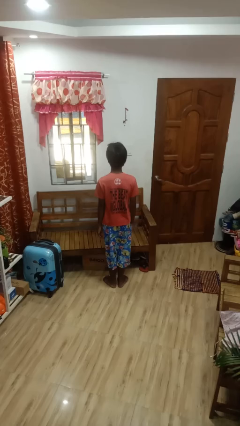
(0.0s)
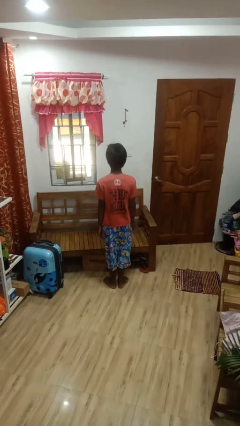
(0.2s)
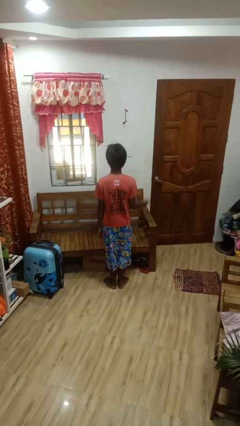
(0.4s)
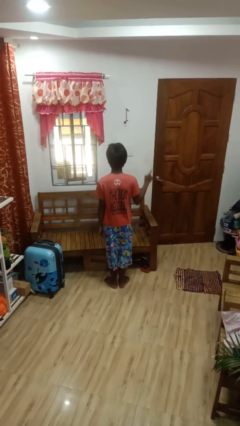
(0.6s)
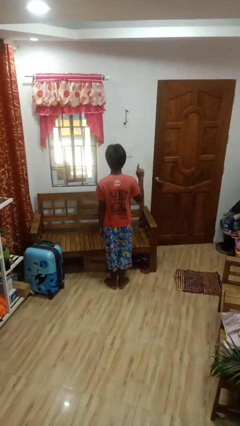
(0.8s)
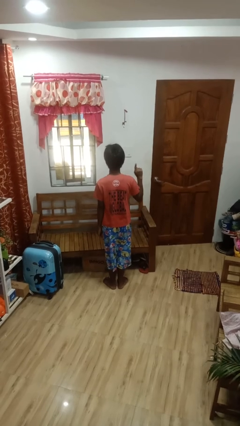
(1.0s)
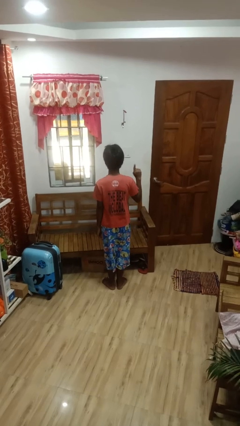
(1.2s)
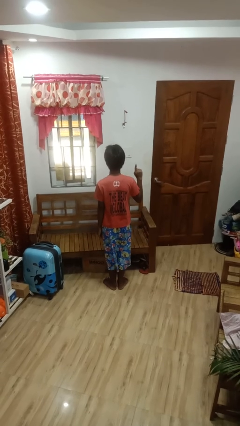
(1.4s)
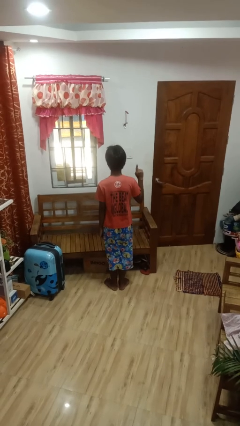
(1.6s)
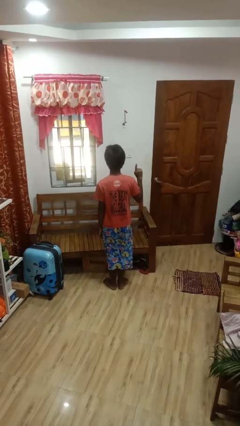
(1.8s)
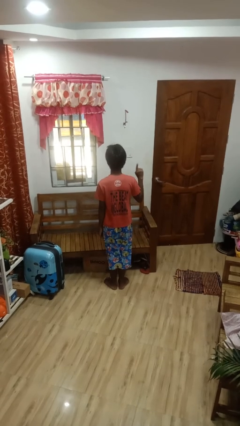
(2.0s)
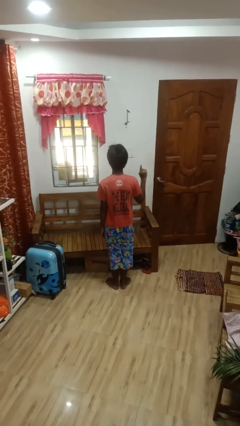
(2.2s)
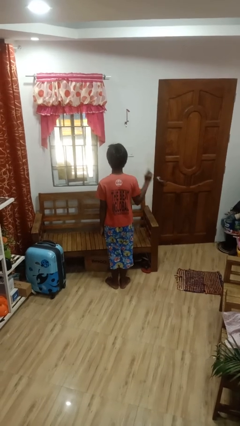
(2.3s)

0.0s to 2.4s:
person gestures number one

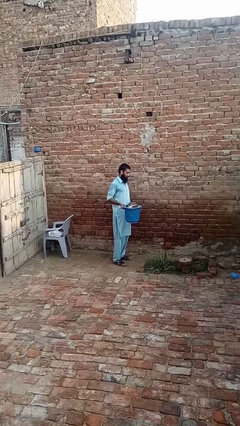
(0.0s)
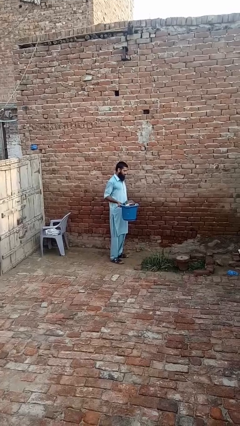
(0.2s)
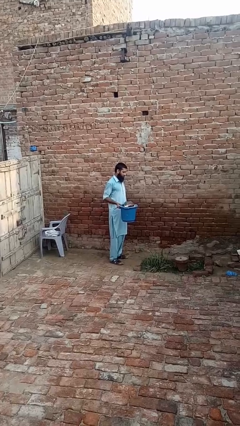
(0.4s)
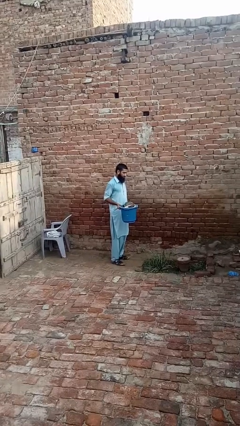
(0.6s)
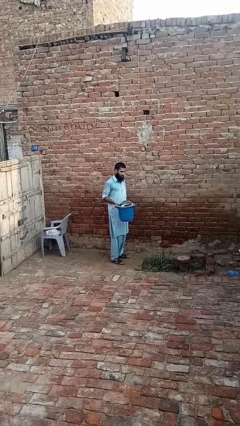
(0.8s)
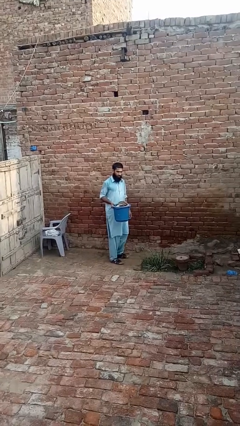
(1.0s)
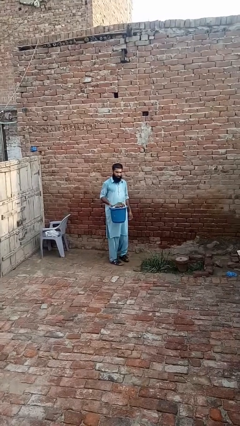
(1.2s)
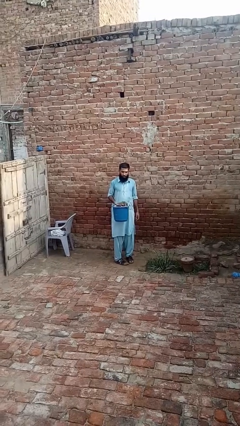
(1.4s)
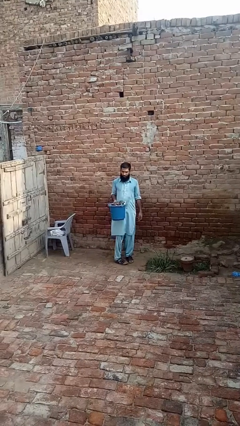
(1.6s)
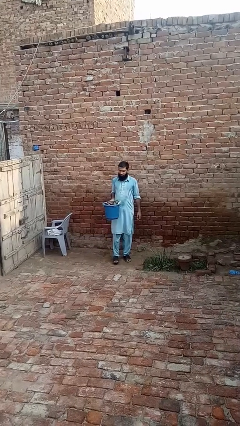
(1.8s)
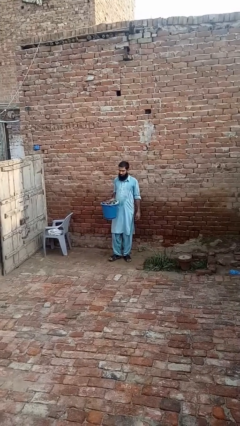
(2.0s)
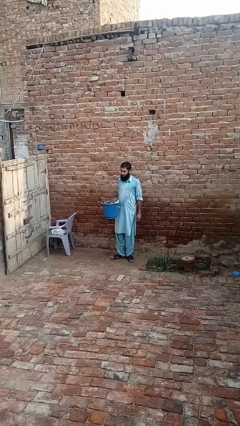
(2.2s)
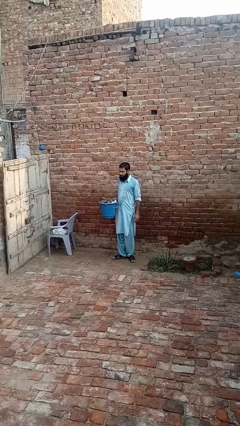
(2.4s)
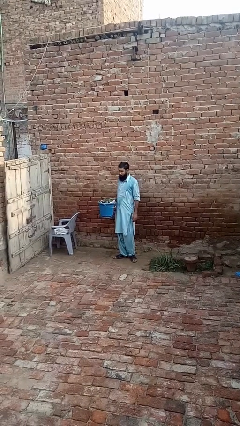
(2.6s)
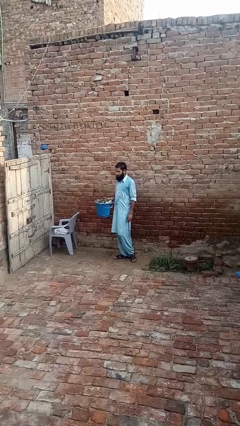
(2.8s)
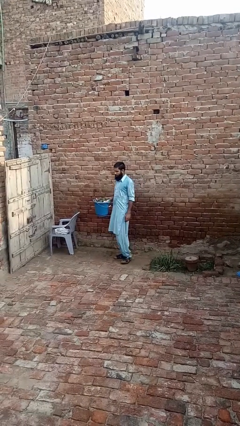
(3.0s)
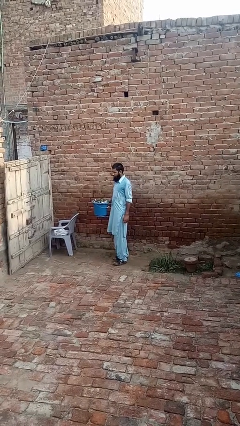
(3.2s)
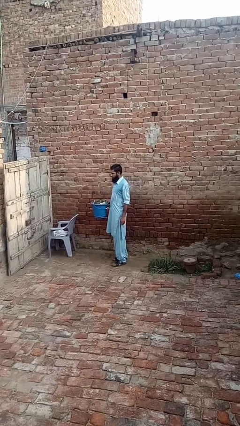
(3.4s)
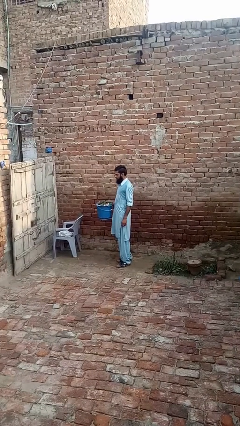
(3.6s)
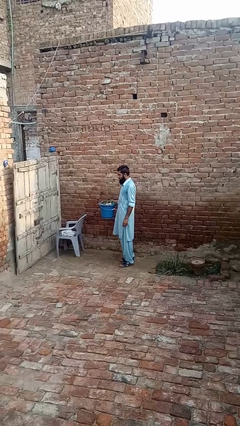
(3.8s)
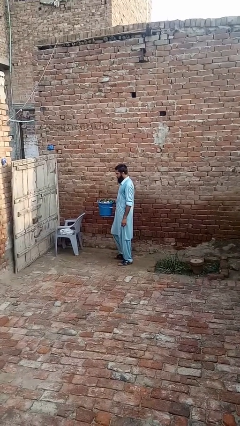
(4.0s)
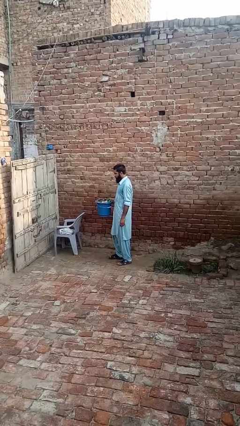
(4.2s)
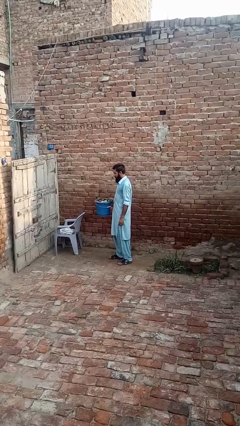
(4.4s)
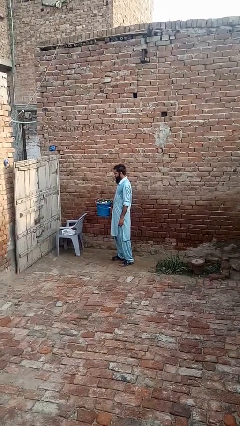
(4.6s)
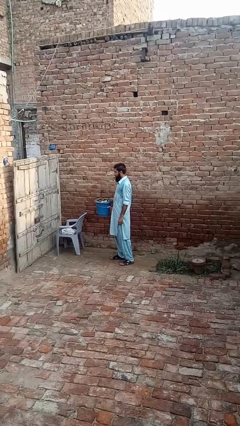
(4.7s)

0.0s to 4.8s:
person carries laundry basket

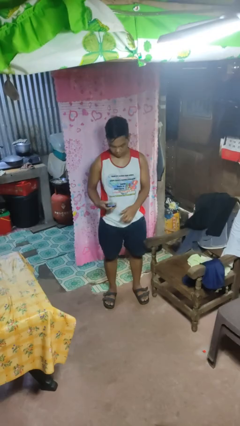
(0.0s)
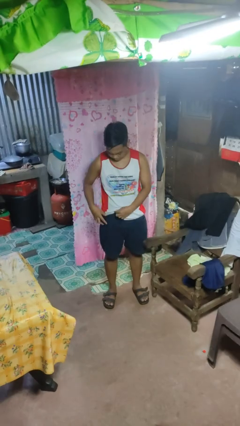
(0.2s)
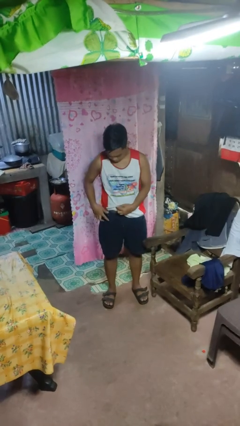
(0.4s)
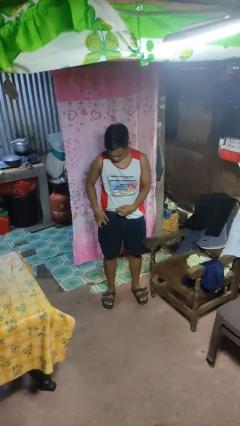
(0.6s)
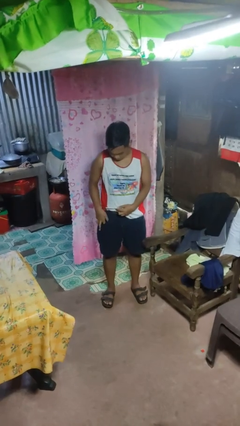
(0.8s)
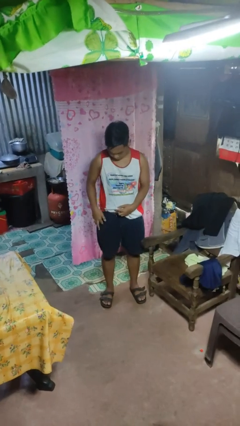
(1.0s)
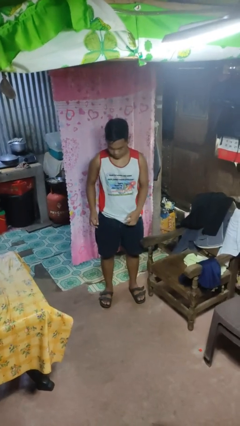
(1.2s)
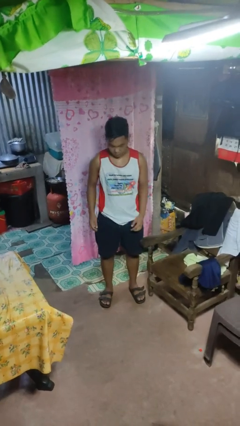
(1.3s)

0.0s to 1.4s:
person puts phone into pocket

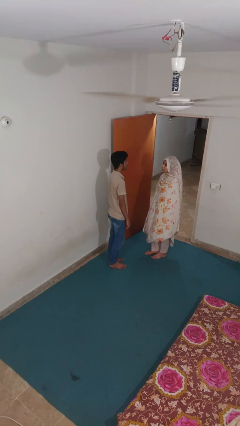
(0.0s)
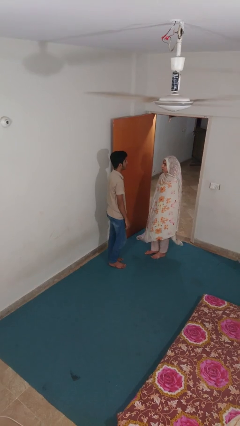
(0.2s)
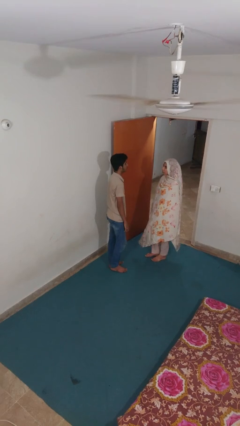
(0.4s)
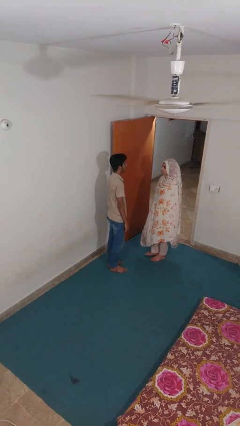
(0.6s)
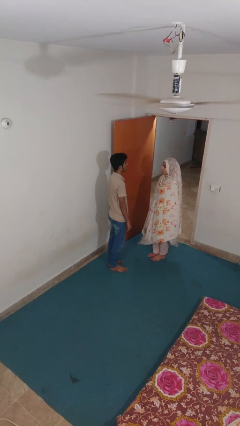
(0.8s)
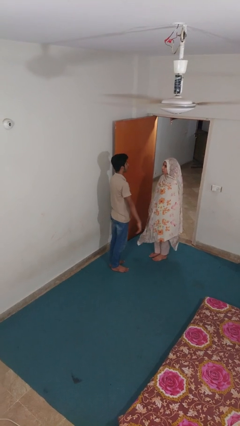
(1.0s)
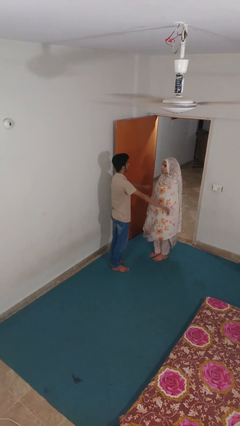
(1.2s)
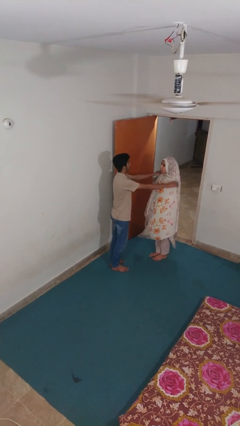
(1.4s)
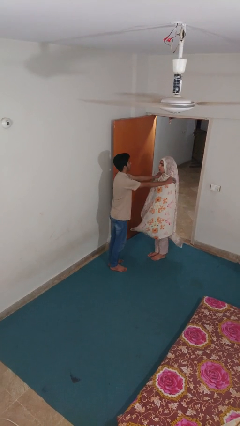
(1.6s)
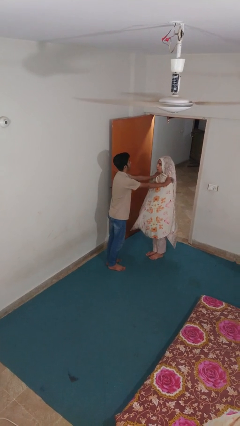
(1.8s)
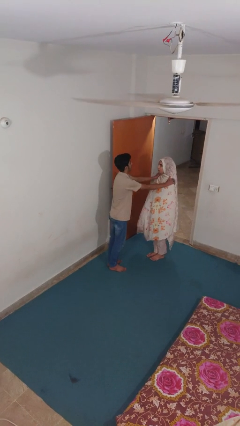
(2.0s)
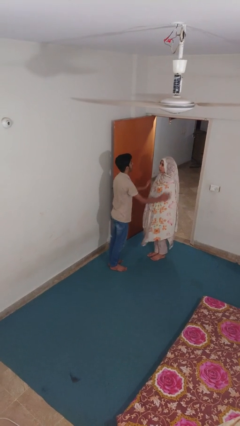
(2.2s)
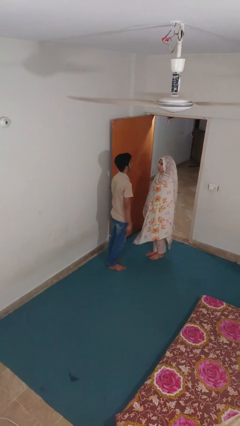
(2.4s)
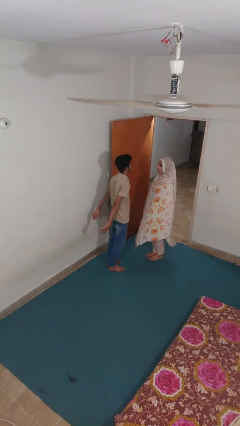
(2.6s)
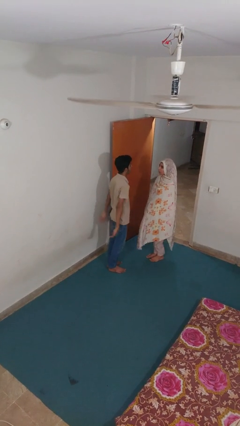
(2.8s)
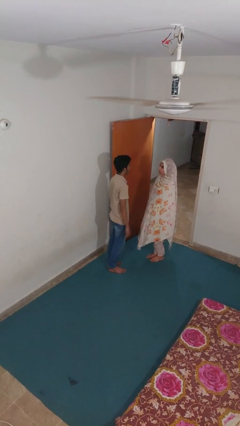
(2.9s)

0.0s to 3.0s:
person pounds shoulders of person

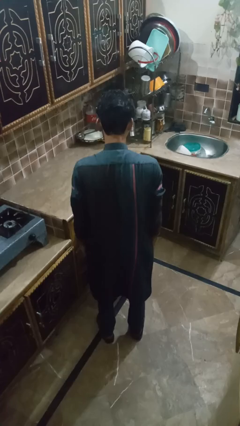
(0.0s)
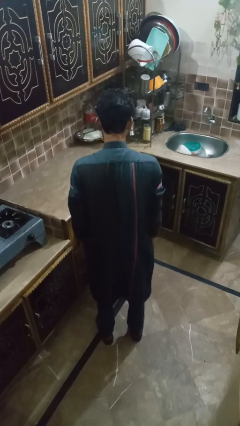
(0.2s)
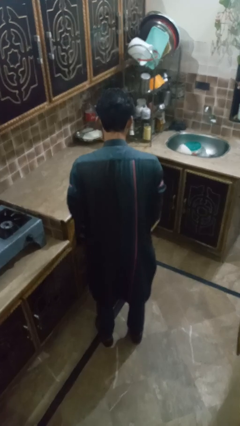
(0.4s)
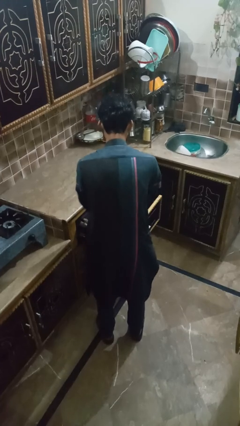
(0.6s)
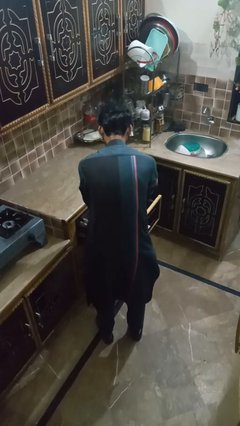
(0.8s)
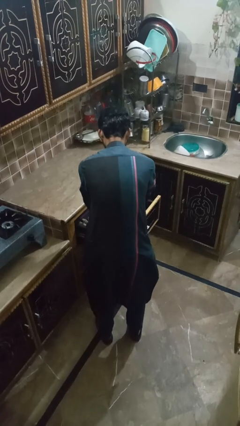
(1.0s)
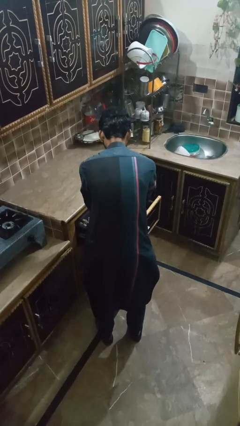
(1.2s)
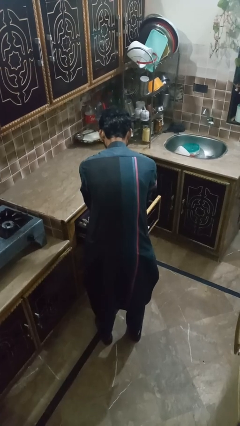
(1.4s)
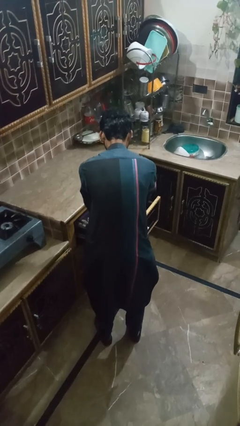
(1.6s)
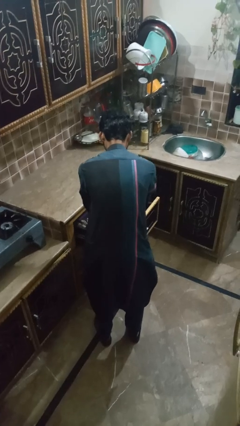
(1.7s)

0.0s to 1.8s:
person searches in kitchen drawer

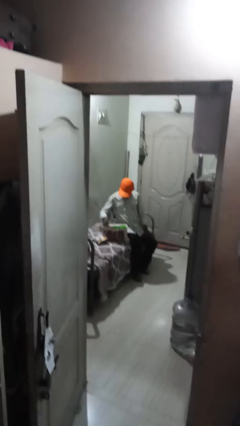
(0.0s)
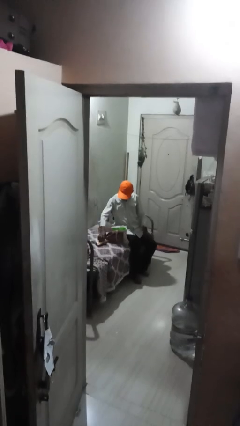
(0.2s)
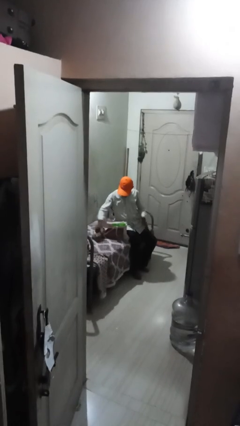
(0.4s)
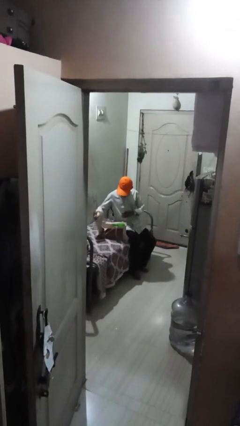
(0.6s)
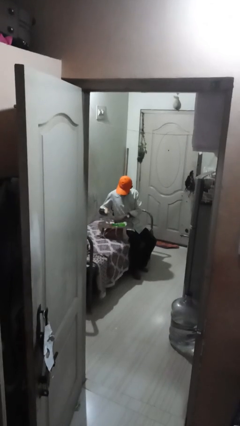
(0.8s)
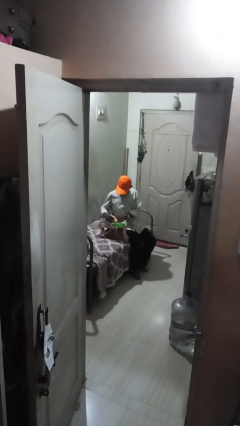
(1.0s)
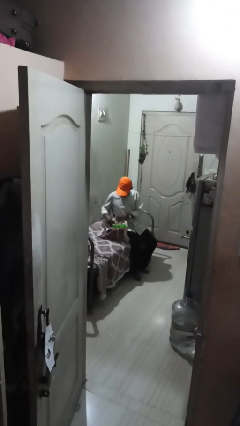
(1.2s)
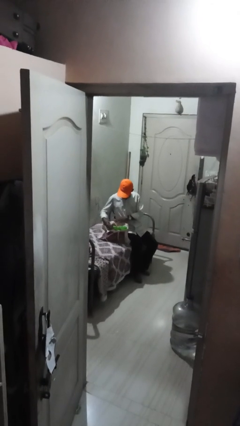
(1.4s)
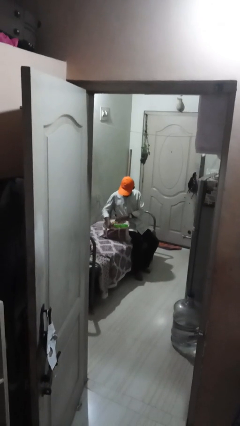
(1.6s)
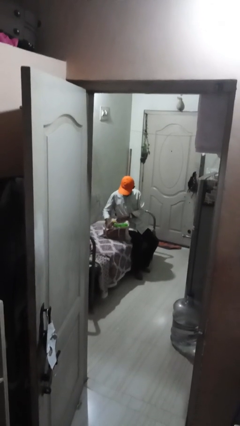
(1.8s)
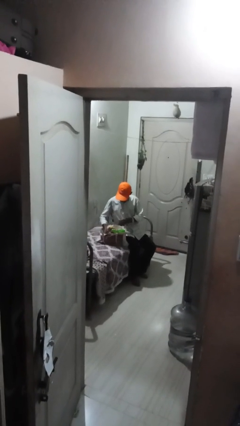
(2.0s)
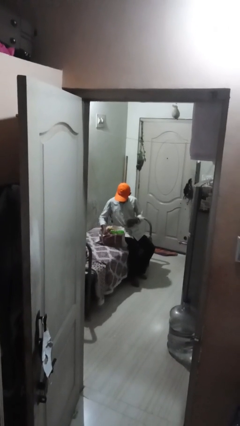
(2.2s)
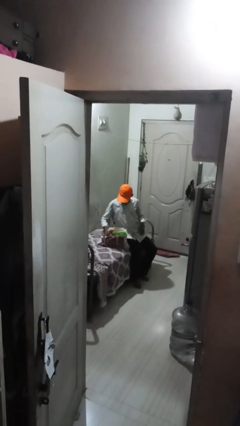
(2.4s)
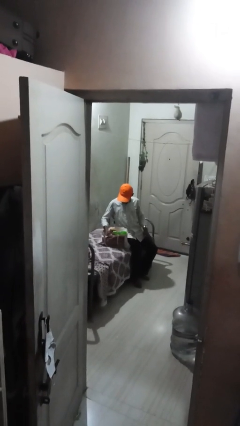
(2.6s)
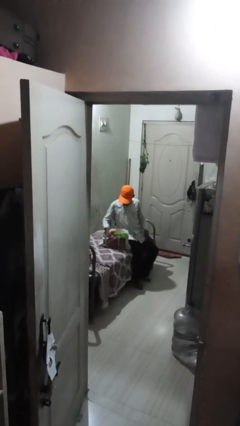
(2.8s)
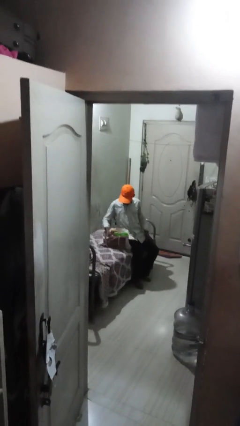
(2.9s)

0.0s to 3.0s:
person puts object into bag
